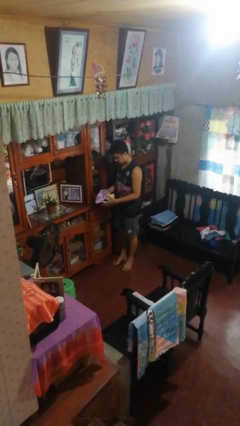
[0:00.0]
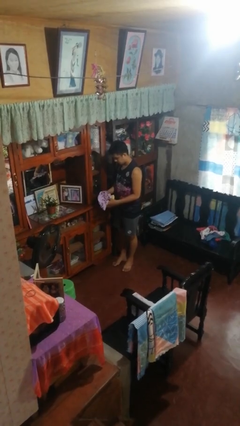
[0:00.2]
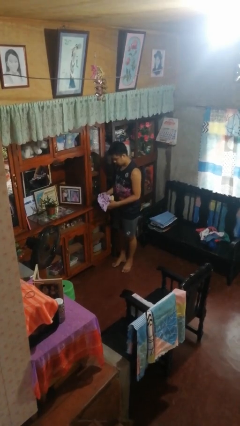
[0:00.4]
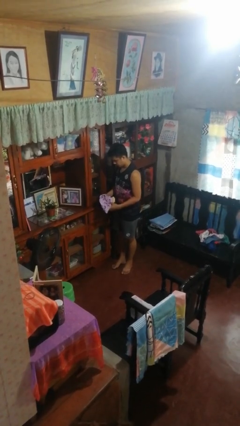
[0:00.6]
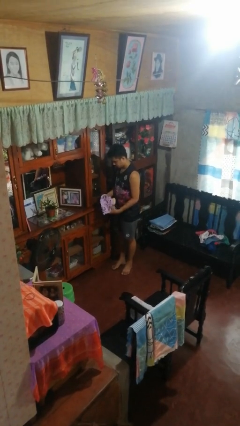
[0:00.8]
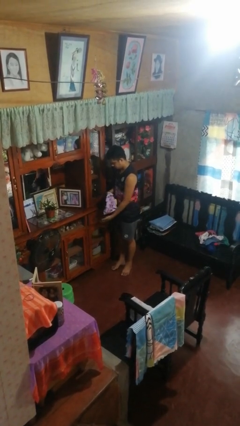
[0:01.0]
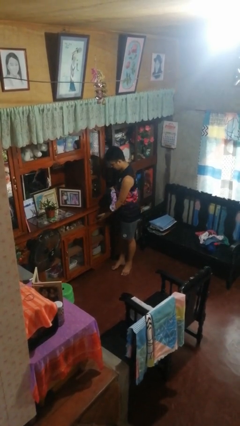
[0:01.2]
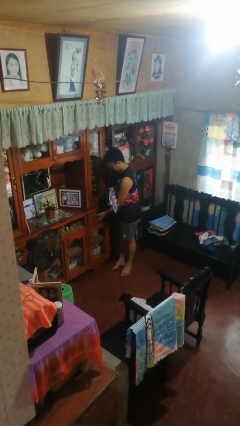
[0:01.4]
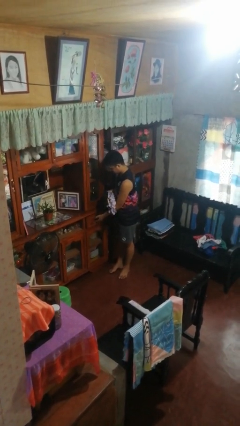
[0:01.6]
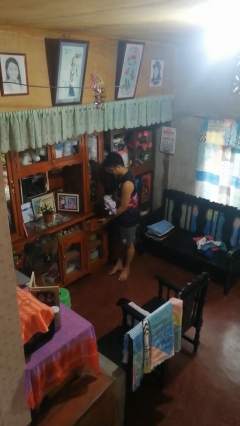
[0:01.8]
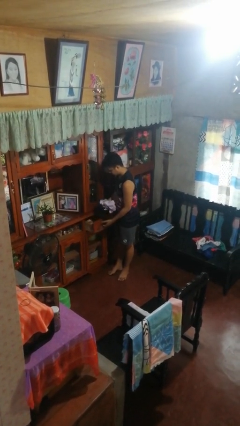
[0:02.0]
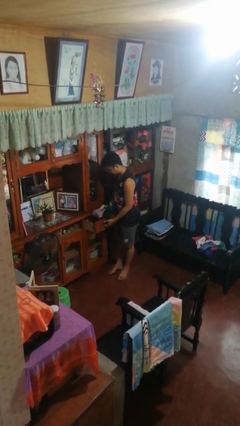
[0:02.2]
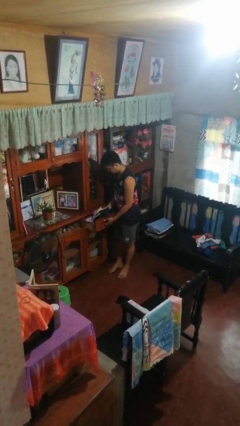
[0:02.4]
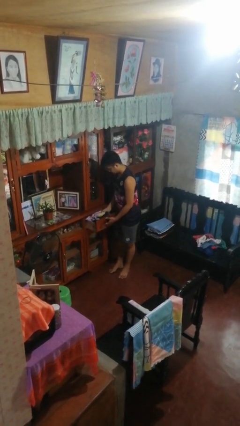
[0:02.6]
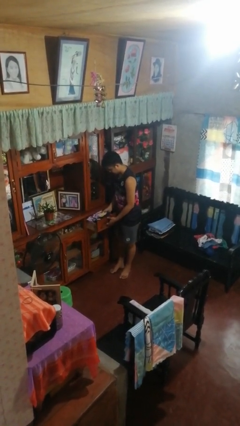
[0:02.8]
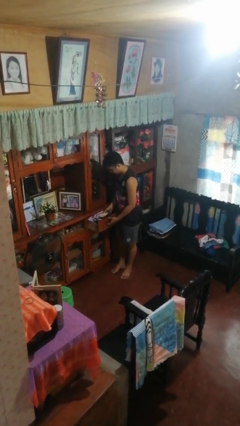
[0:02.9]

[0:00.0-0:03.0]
person puts clothes into dresser

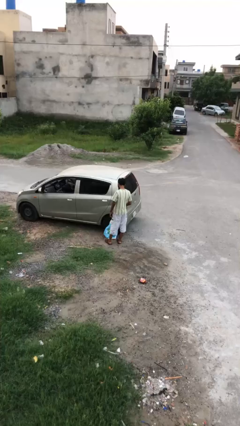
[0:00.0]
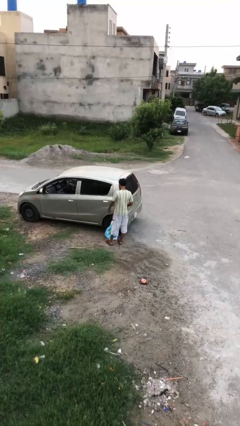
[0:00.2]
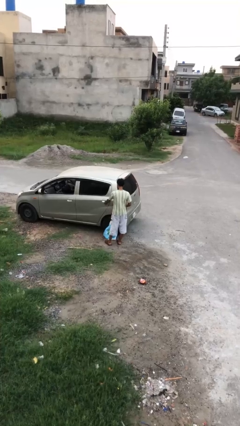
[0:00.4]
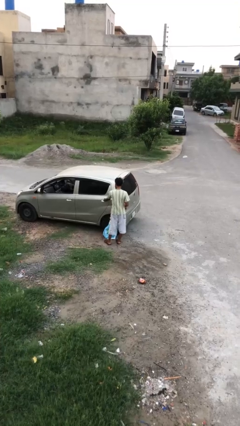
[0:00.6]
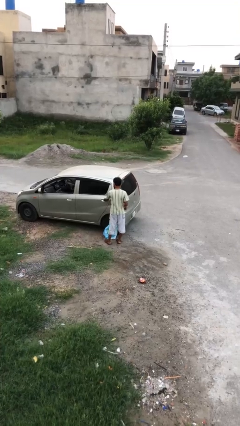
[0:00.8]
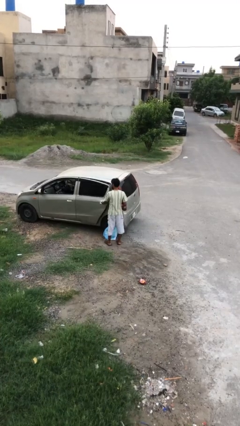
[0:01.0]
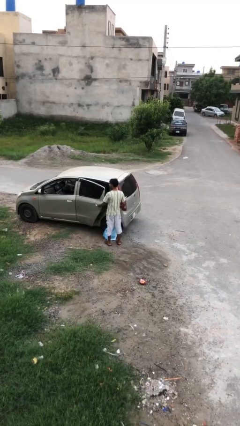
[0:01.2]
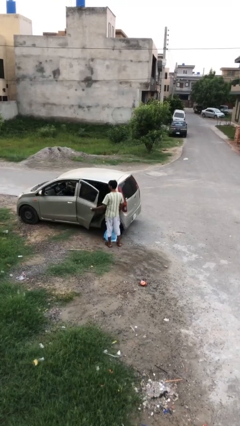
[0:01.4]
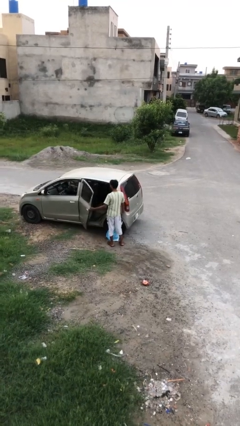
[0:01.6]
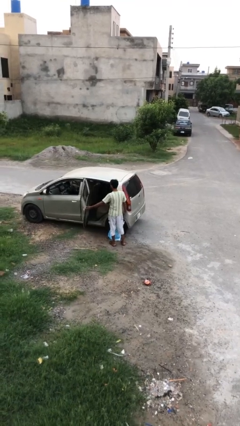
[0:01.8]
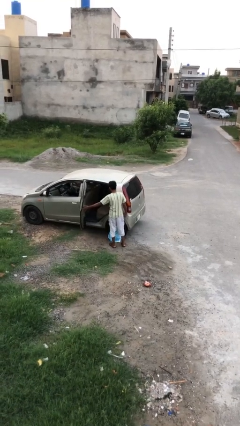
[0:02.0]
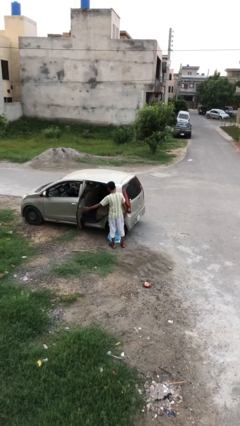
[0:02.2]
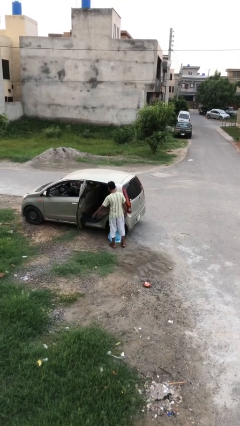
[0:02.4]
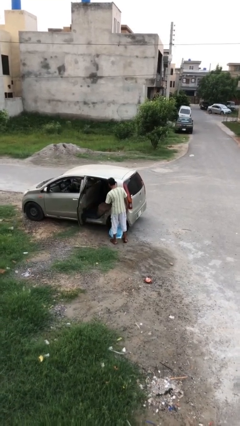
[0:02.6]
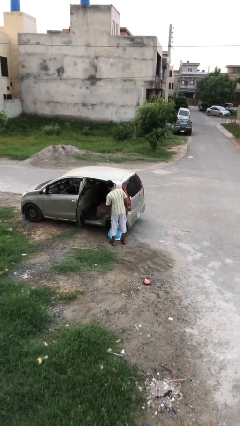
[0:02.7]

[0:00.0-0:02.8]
person opens car door

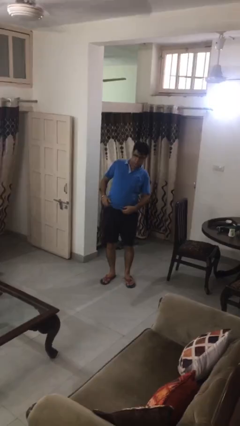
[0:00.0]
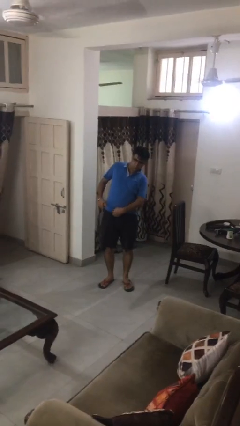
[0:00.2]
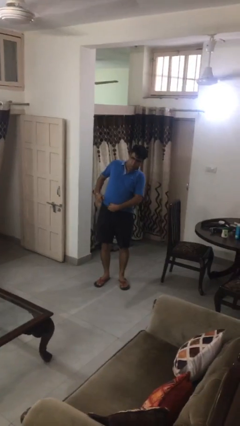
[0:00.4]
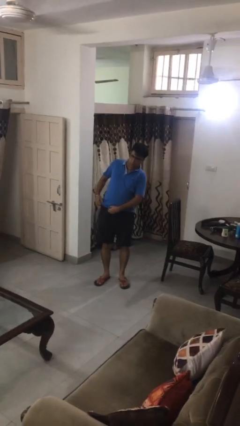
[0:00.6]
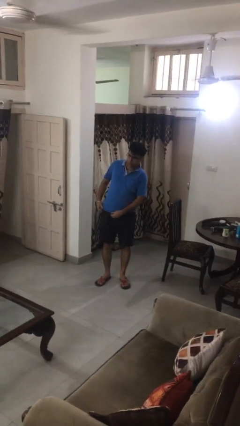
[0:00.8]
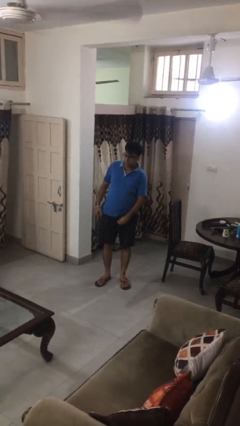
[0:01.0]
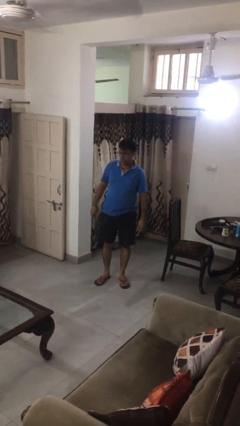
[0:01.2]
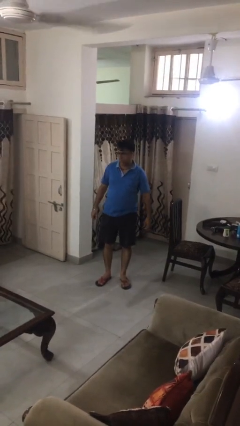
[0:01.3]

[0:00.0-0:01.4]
person hikes up pants

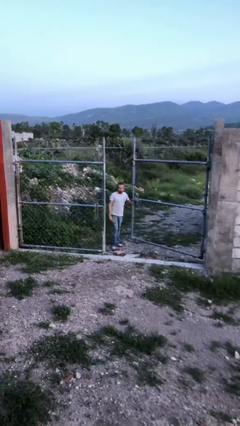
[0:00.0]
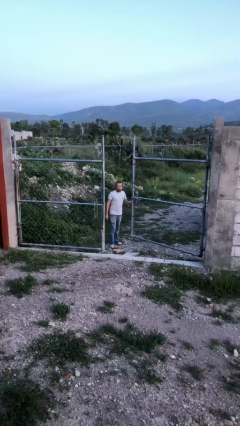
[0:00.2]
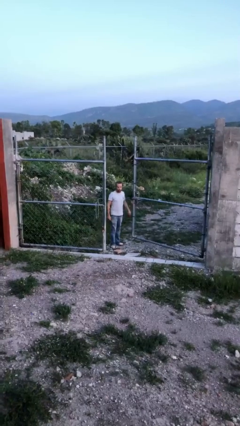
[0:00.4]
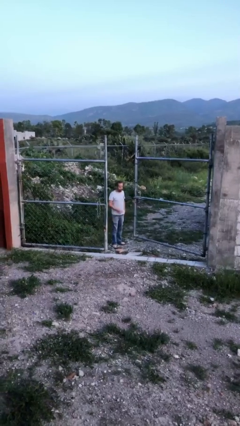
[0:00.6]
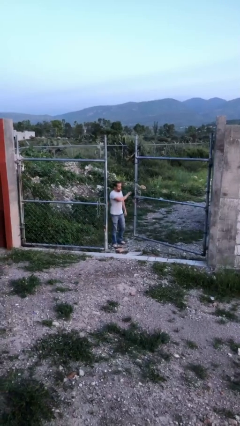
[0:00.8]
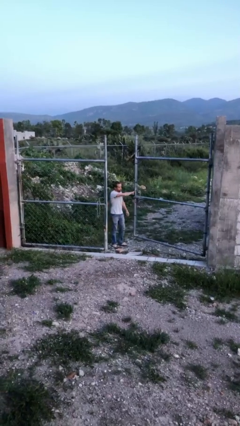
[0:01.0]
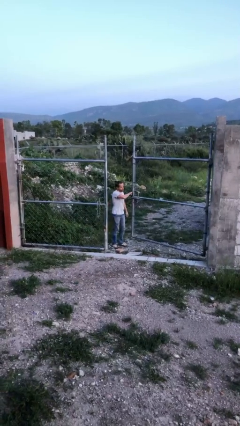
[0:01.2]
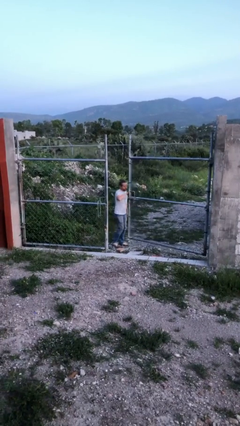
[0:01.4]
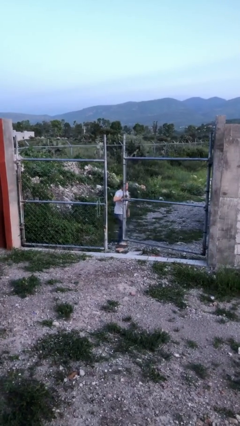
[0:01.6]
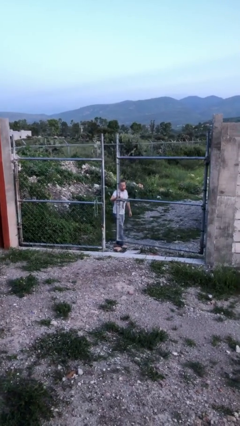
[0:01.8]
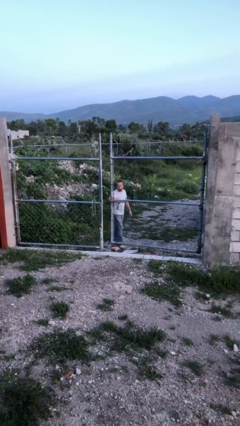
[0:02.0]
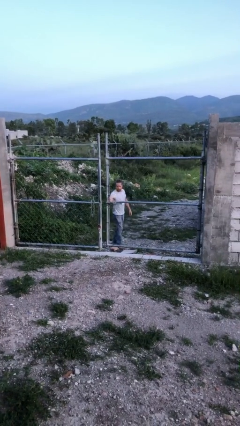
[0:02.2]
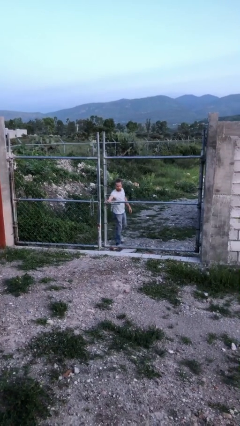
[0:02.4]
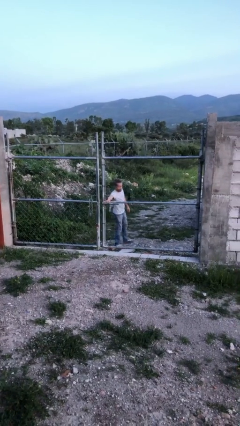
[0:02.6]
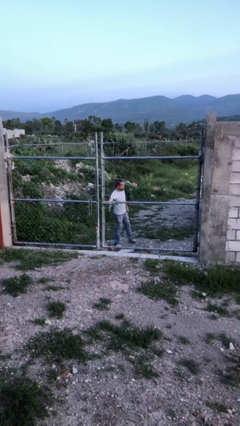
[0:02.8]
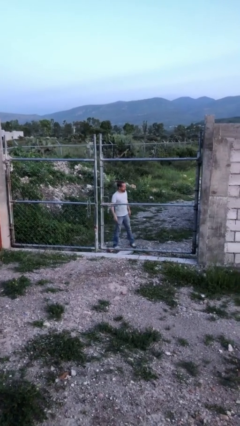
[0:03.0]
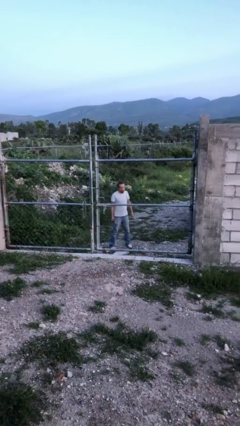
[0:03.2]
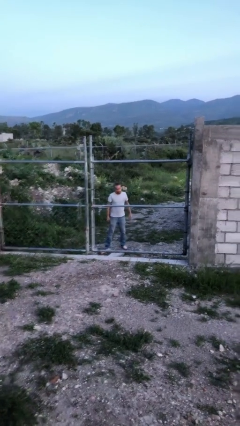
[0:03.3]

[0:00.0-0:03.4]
person closes gate

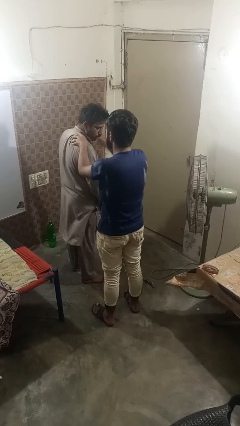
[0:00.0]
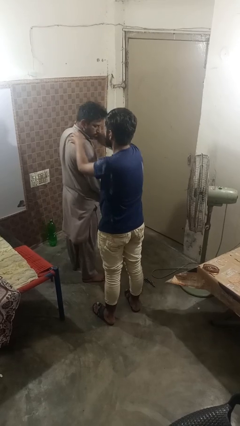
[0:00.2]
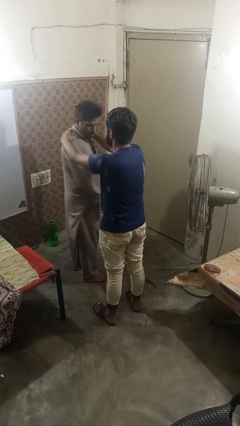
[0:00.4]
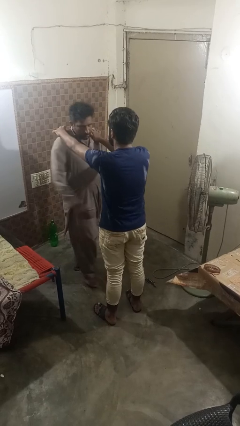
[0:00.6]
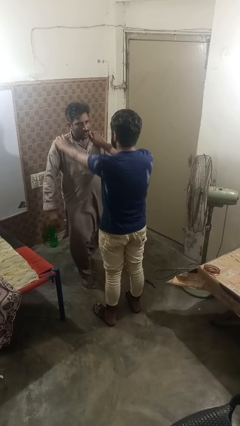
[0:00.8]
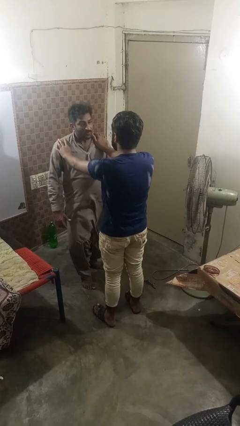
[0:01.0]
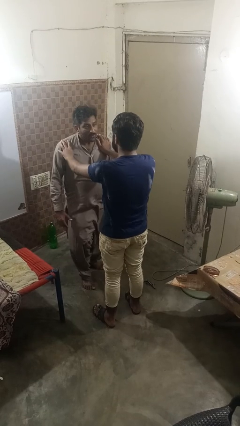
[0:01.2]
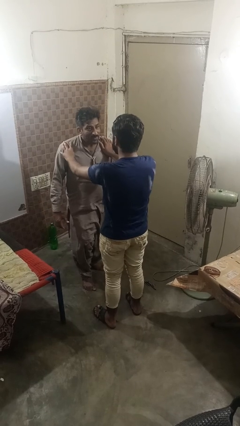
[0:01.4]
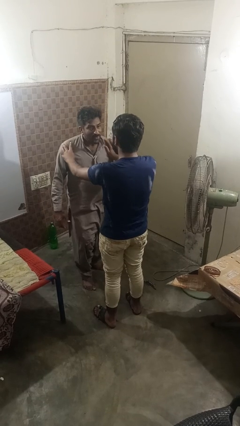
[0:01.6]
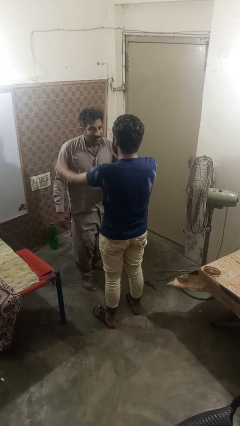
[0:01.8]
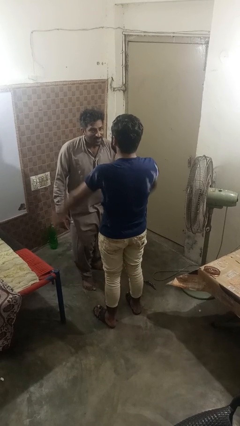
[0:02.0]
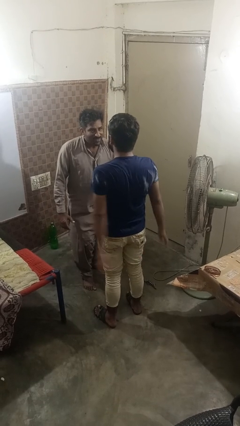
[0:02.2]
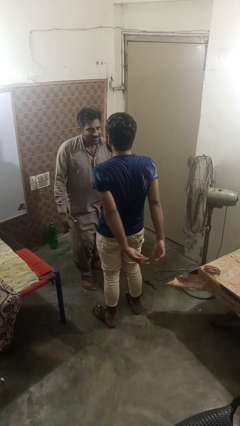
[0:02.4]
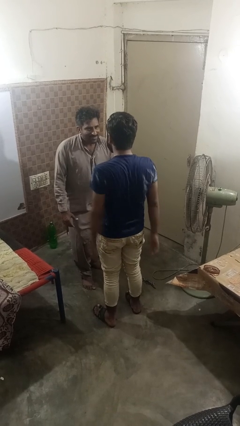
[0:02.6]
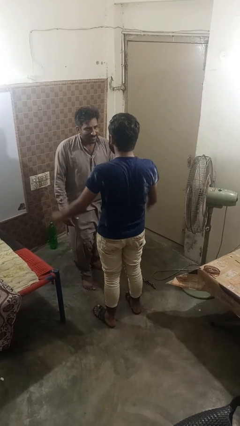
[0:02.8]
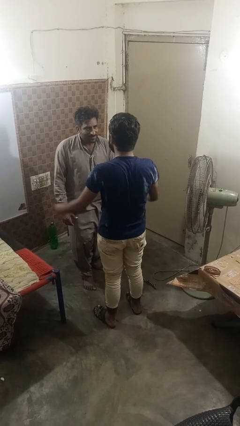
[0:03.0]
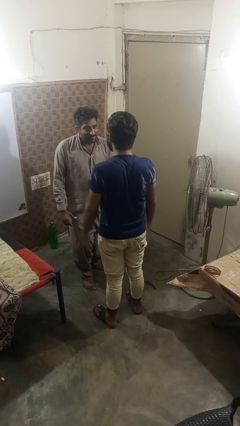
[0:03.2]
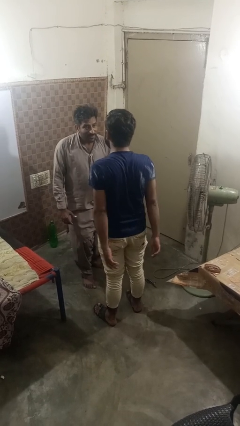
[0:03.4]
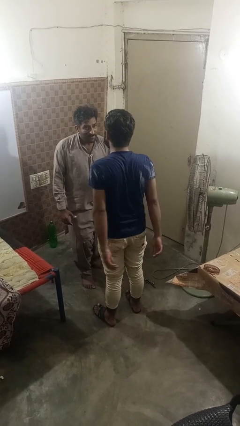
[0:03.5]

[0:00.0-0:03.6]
person spins person around

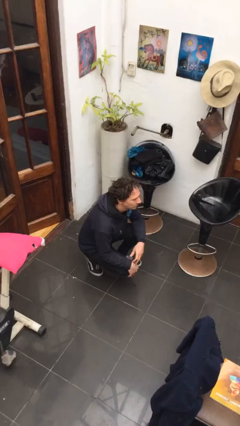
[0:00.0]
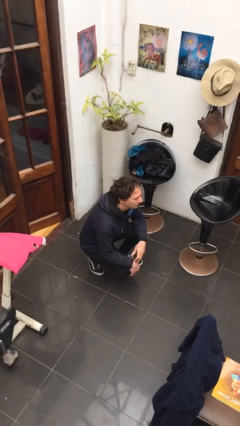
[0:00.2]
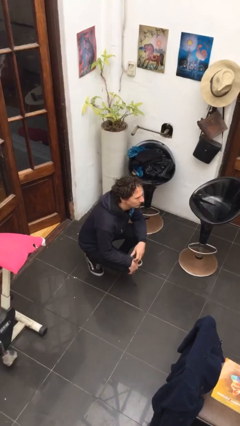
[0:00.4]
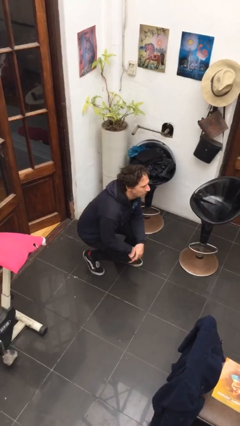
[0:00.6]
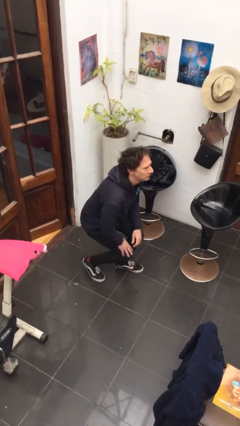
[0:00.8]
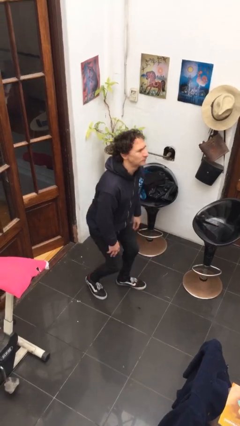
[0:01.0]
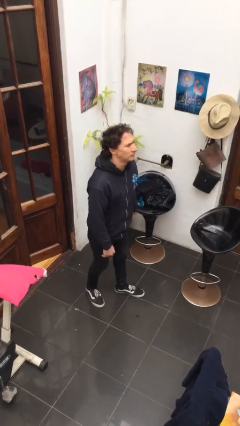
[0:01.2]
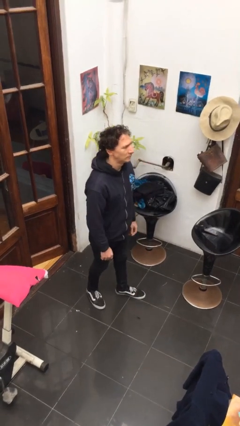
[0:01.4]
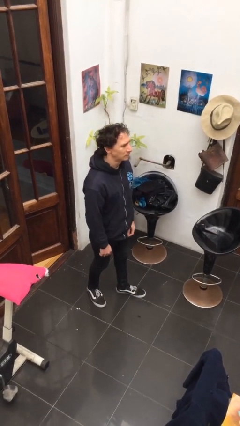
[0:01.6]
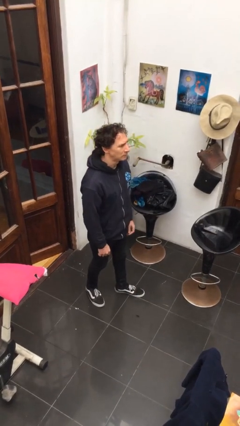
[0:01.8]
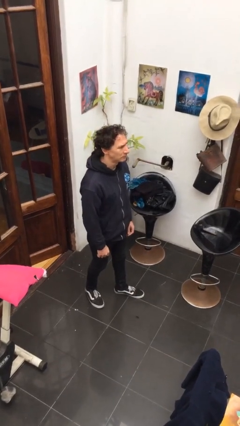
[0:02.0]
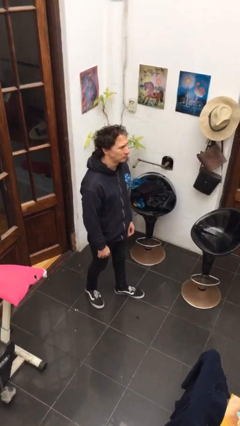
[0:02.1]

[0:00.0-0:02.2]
person stands up

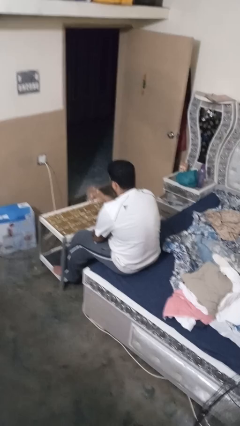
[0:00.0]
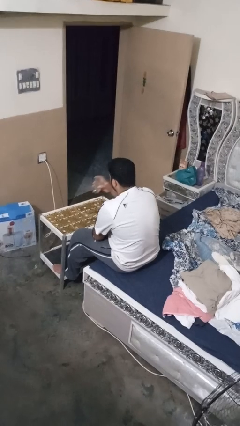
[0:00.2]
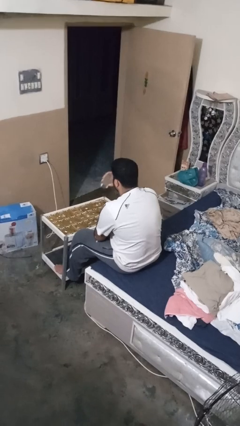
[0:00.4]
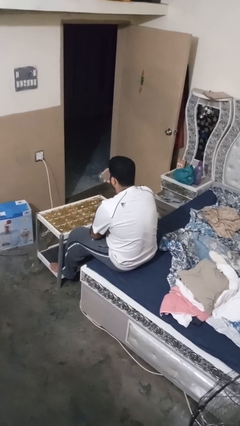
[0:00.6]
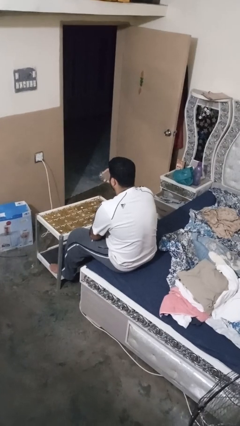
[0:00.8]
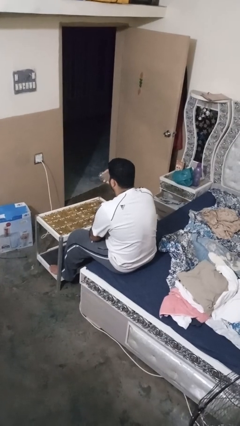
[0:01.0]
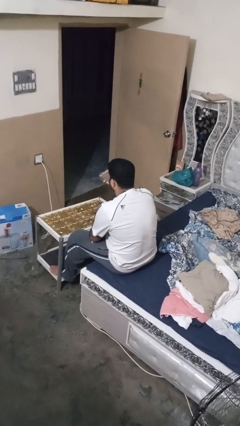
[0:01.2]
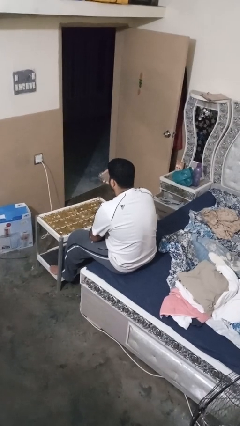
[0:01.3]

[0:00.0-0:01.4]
person drinks from shotglass
